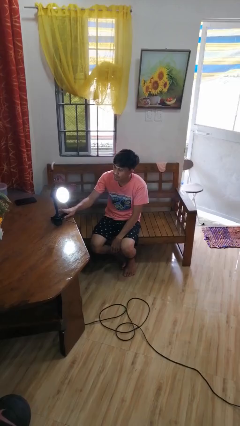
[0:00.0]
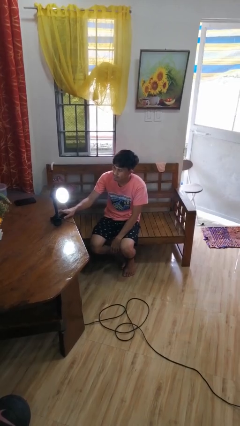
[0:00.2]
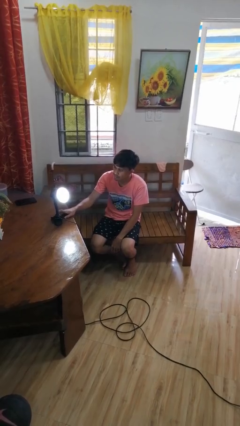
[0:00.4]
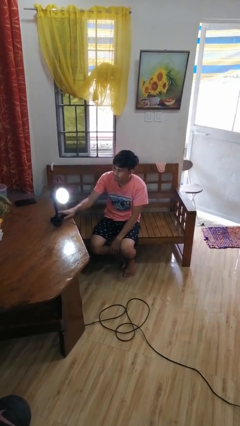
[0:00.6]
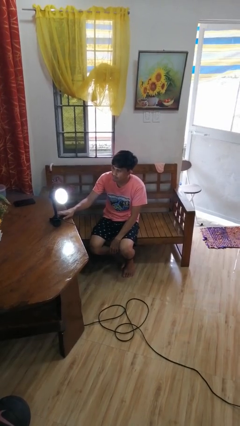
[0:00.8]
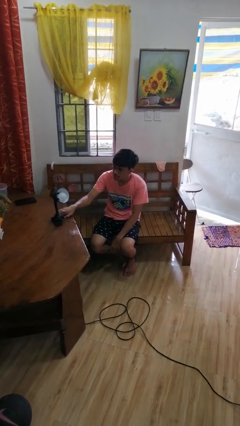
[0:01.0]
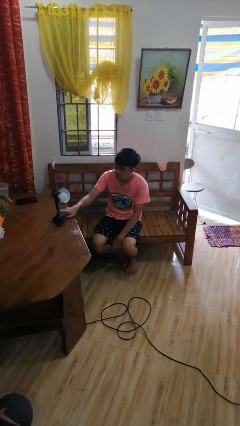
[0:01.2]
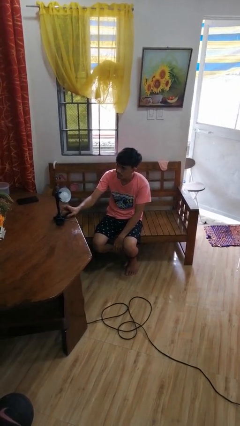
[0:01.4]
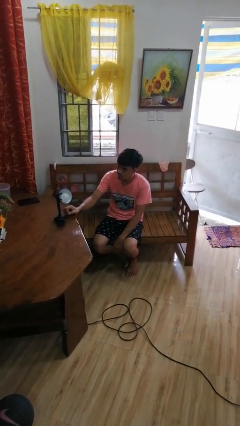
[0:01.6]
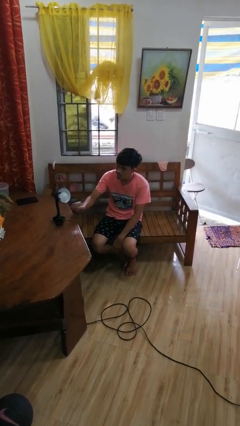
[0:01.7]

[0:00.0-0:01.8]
person turns off lamp

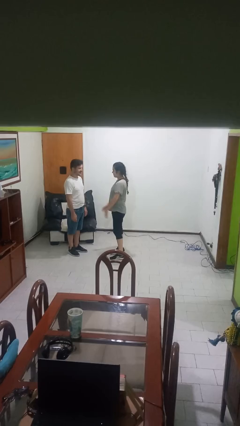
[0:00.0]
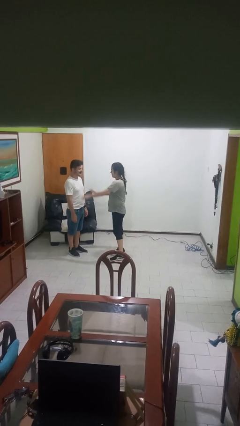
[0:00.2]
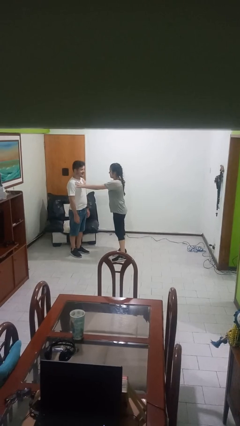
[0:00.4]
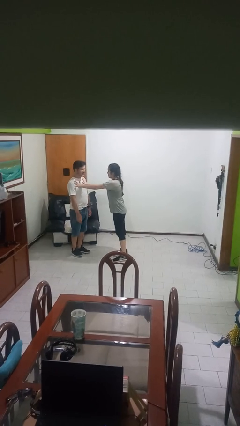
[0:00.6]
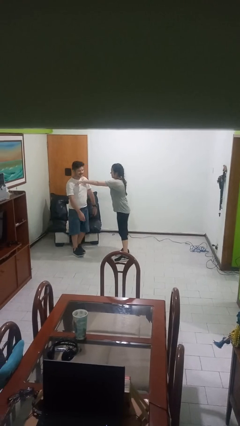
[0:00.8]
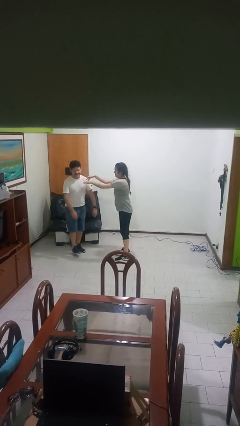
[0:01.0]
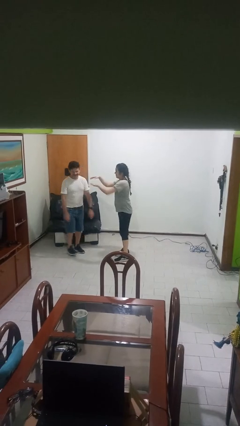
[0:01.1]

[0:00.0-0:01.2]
person shoves person

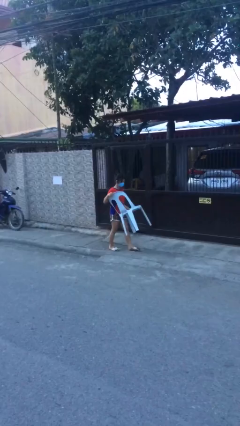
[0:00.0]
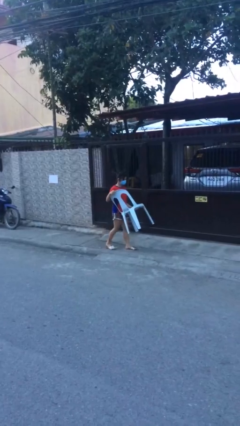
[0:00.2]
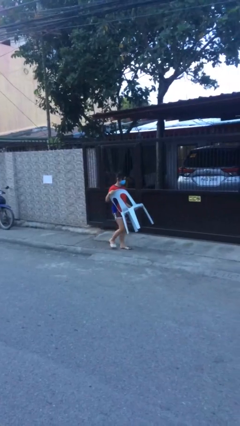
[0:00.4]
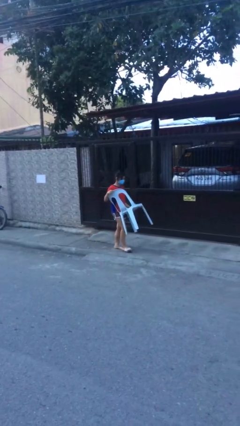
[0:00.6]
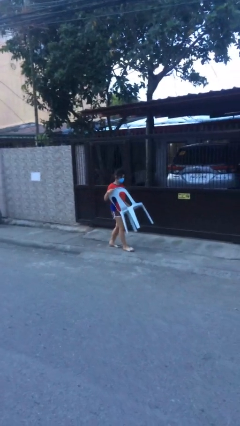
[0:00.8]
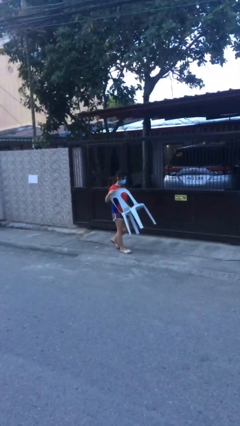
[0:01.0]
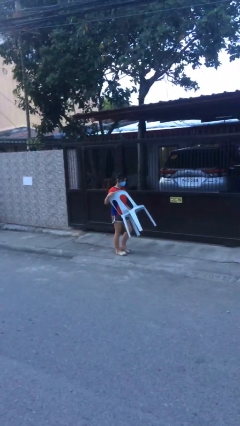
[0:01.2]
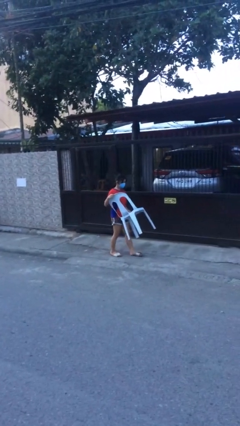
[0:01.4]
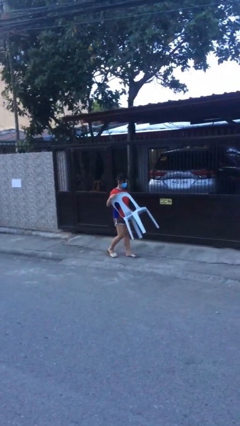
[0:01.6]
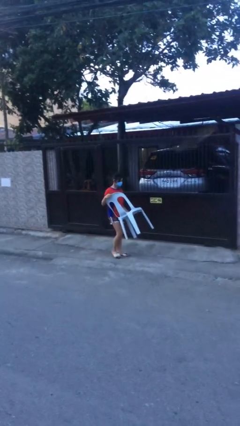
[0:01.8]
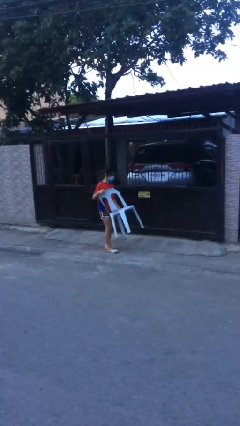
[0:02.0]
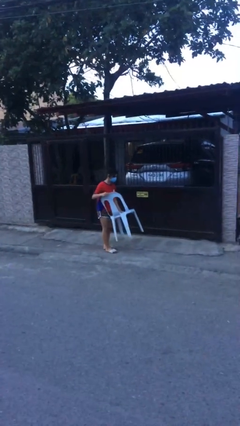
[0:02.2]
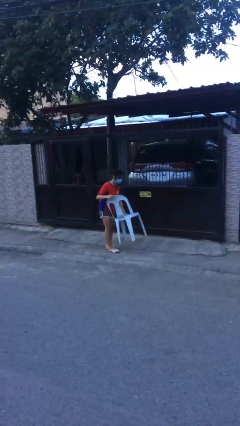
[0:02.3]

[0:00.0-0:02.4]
person carries heavy object

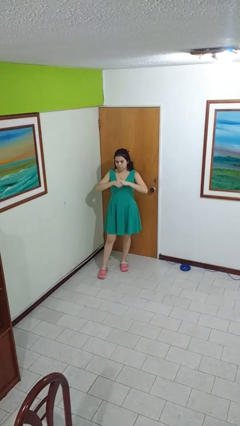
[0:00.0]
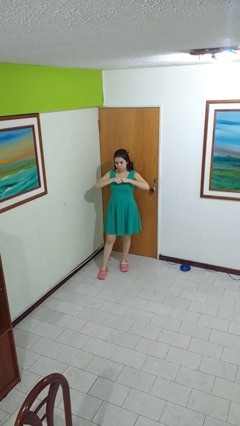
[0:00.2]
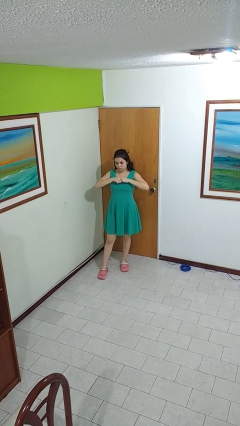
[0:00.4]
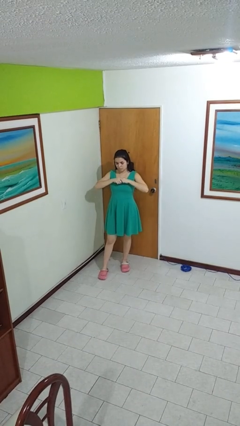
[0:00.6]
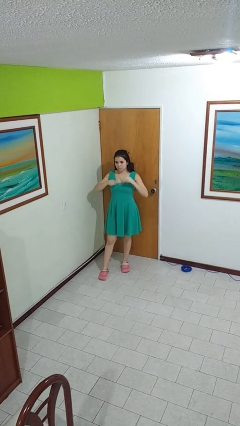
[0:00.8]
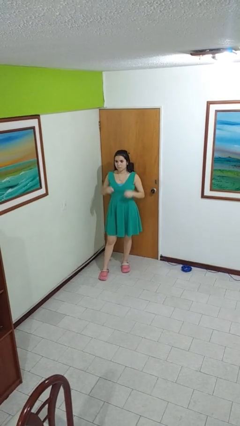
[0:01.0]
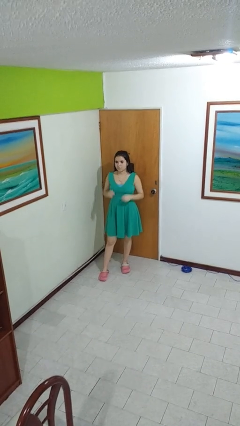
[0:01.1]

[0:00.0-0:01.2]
person cracks knuckles

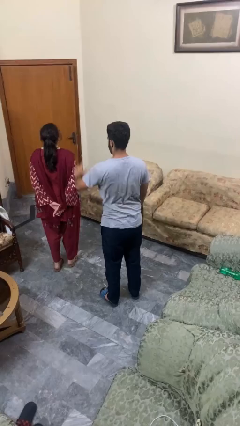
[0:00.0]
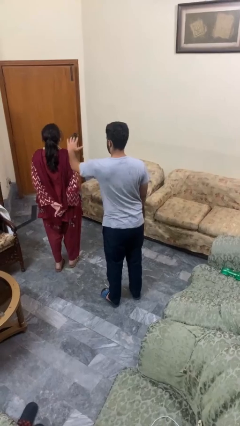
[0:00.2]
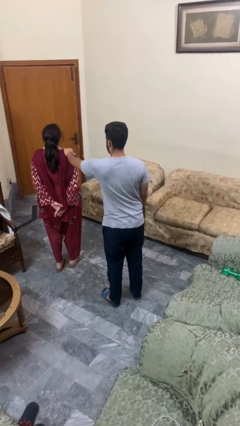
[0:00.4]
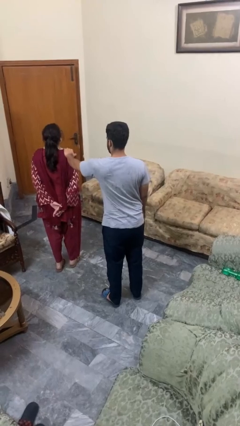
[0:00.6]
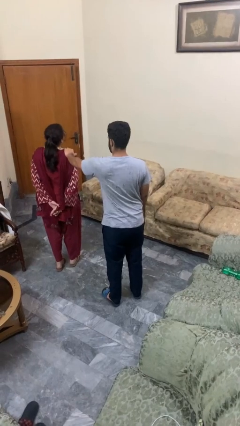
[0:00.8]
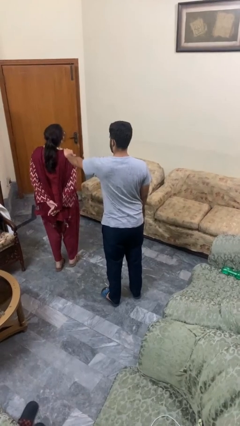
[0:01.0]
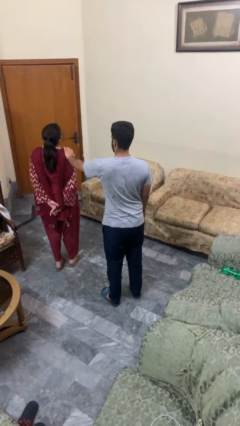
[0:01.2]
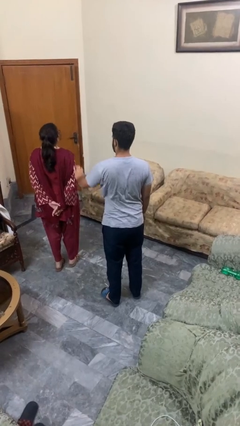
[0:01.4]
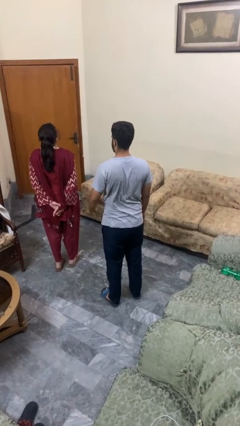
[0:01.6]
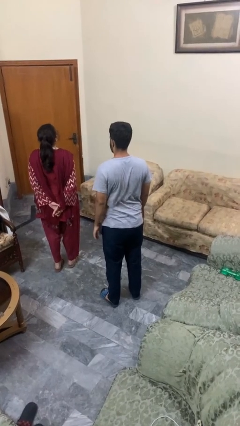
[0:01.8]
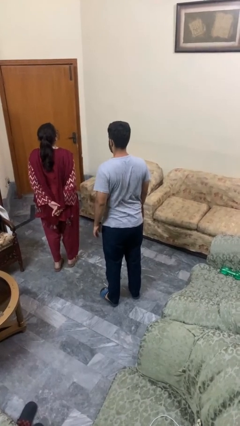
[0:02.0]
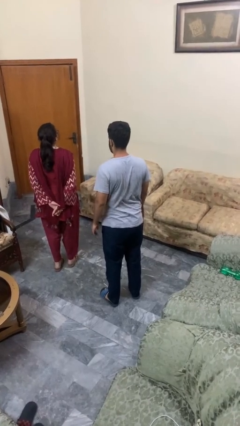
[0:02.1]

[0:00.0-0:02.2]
person pounds shoulders of person

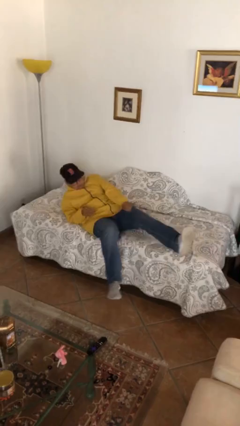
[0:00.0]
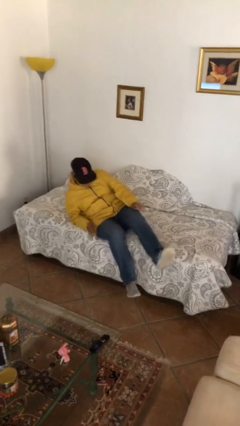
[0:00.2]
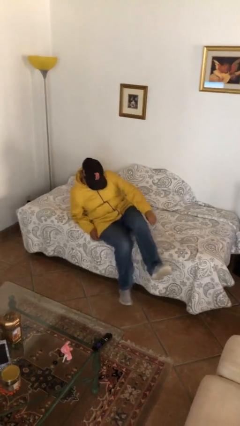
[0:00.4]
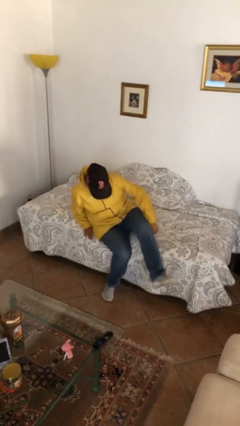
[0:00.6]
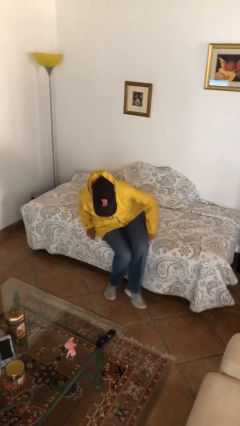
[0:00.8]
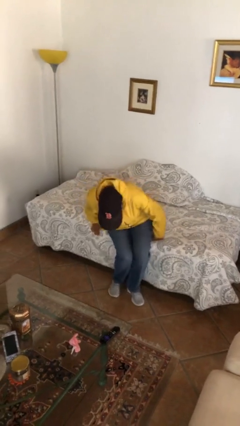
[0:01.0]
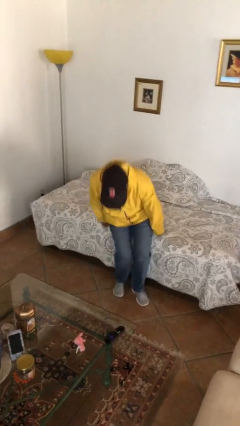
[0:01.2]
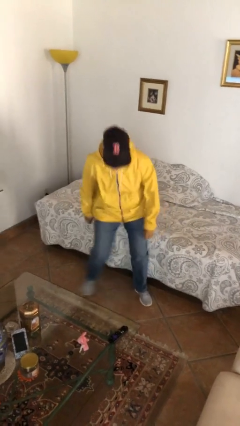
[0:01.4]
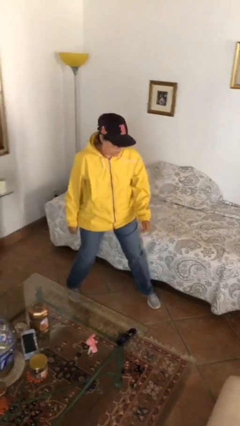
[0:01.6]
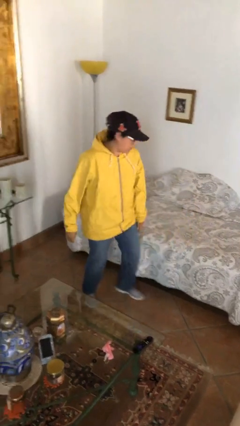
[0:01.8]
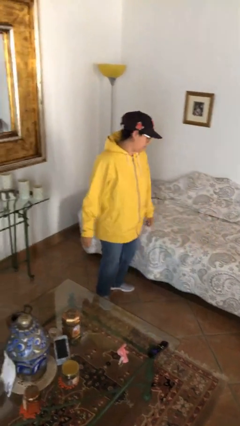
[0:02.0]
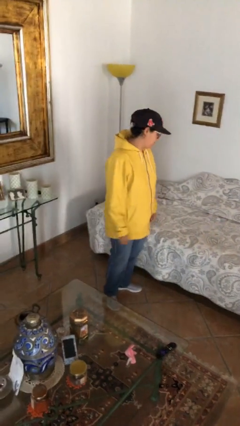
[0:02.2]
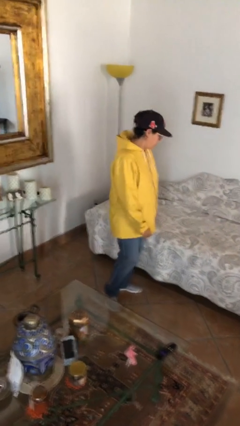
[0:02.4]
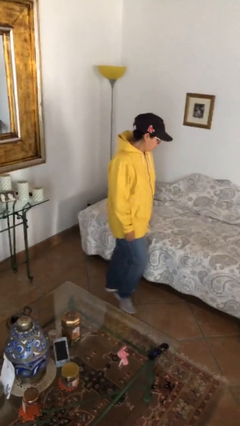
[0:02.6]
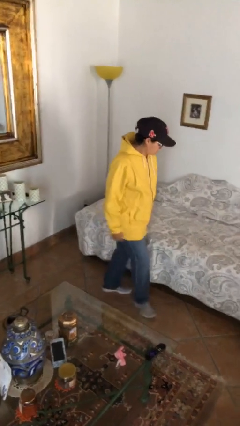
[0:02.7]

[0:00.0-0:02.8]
person stands up

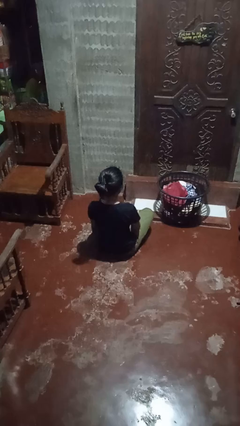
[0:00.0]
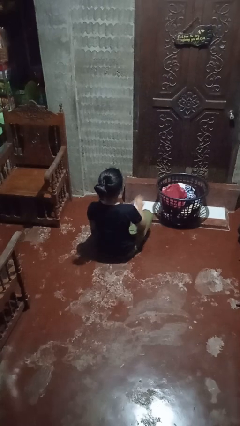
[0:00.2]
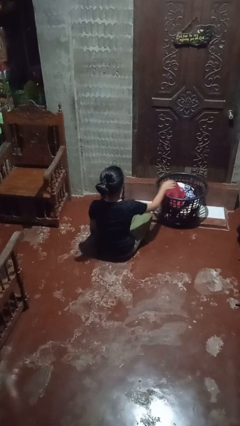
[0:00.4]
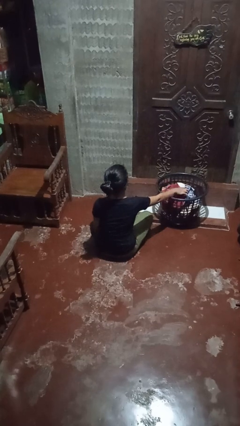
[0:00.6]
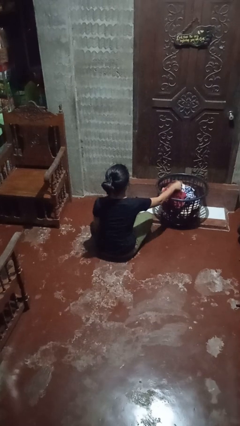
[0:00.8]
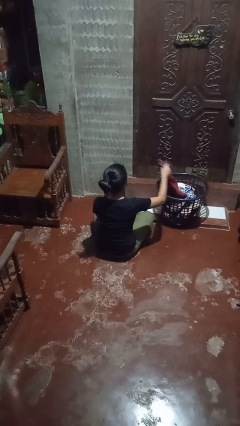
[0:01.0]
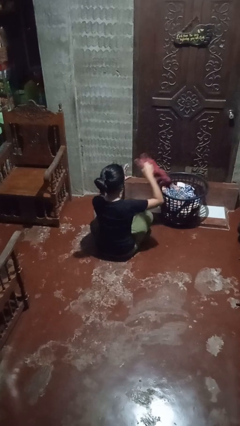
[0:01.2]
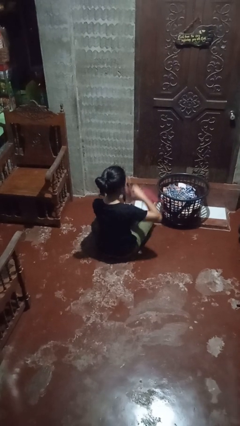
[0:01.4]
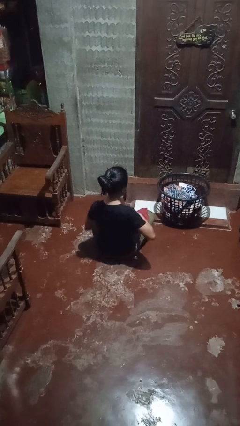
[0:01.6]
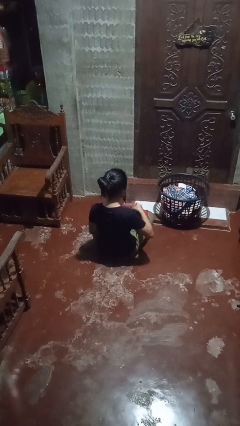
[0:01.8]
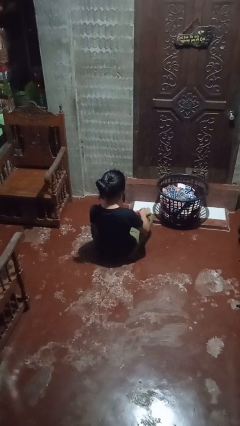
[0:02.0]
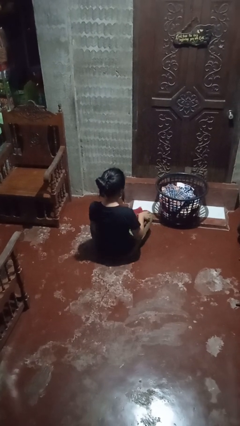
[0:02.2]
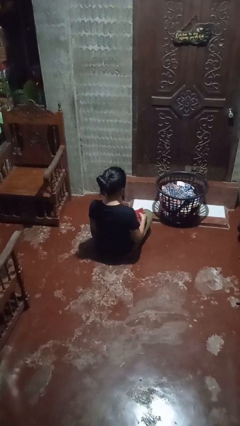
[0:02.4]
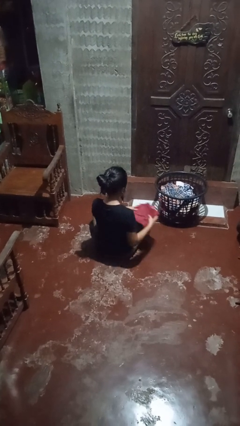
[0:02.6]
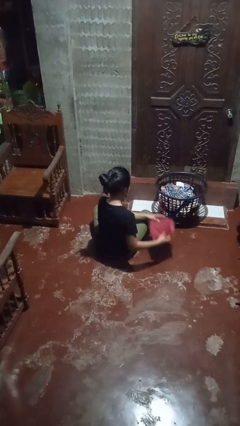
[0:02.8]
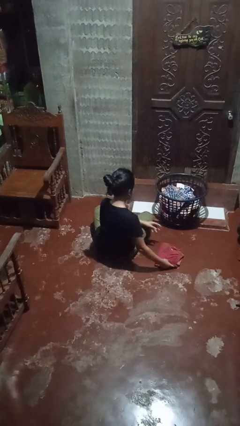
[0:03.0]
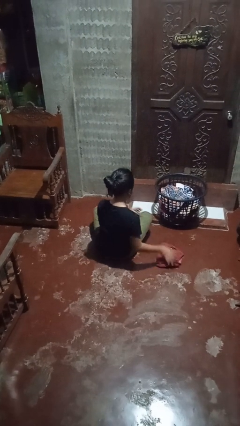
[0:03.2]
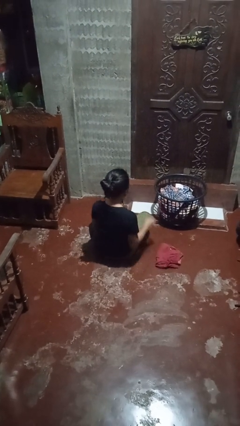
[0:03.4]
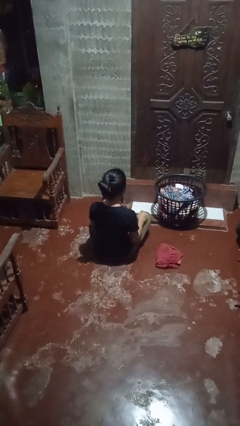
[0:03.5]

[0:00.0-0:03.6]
person folds pants

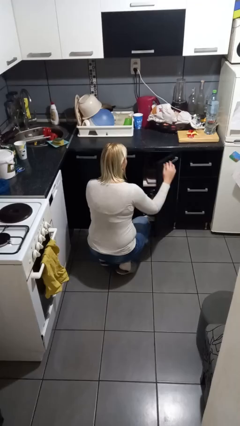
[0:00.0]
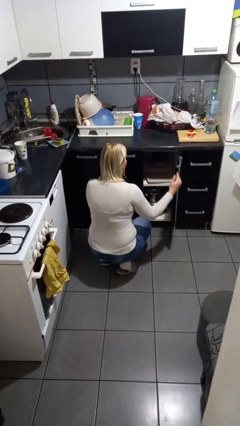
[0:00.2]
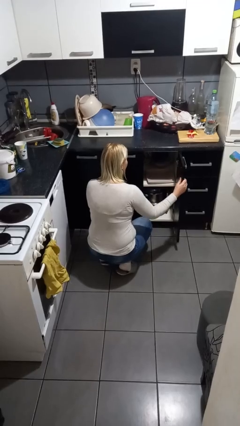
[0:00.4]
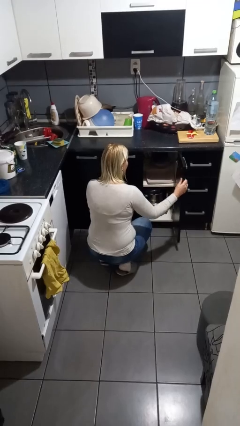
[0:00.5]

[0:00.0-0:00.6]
person opens cabinet

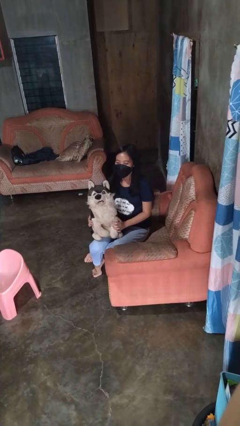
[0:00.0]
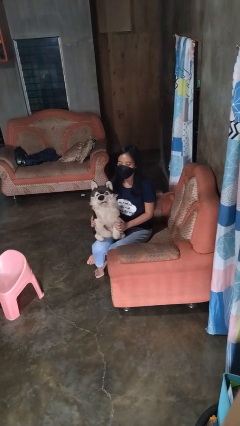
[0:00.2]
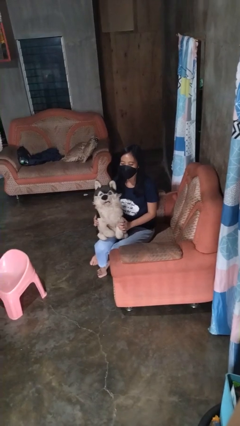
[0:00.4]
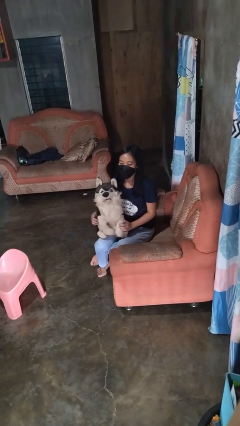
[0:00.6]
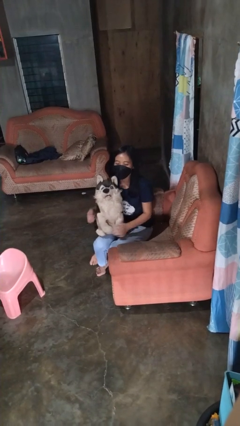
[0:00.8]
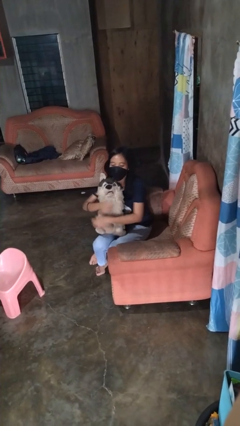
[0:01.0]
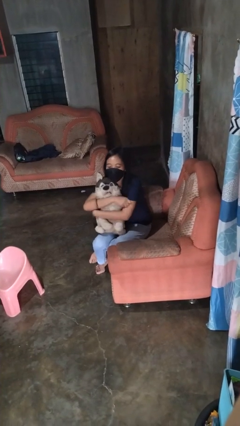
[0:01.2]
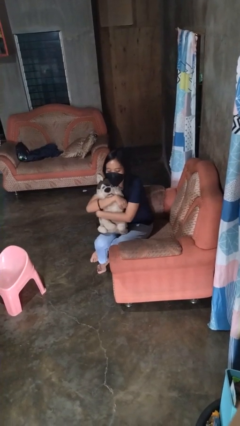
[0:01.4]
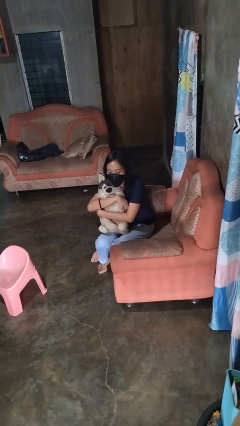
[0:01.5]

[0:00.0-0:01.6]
person hugs stuffed animal
